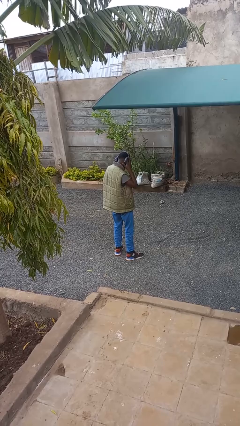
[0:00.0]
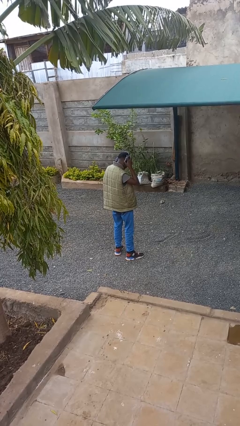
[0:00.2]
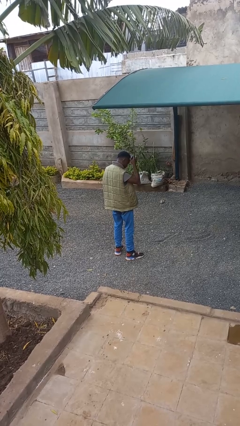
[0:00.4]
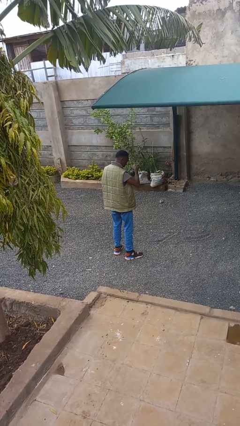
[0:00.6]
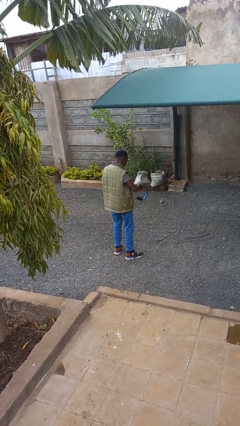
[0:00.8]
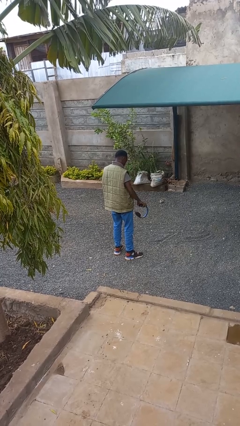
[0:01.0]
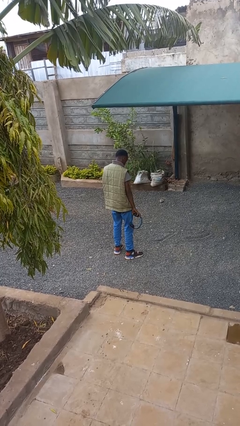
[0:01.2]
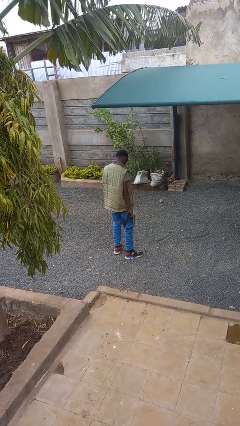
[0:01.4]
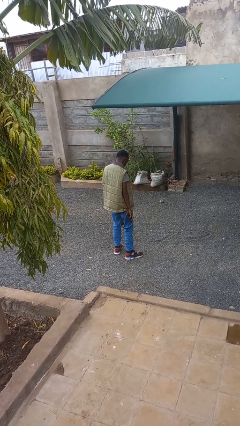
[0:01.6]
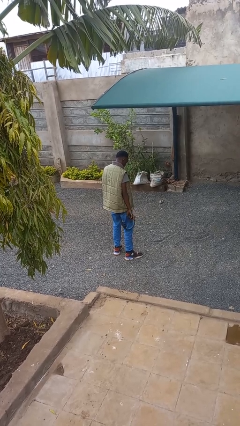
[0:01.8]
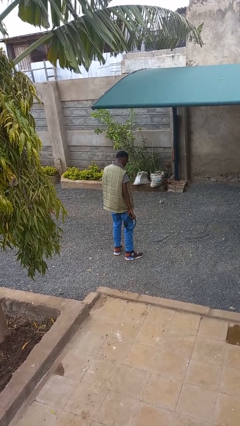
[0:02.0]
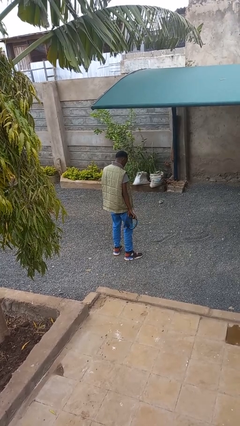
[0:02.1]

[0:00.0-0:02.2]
person takes off headphones

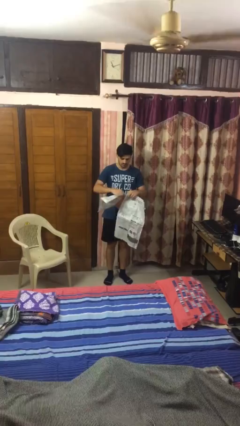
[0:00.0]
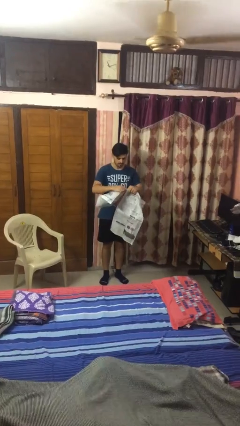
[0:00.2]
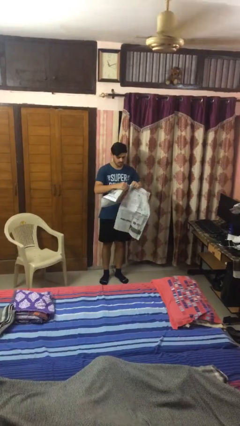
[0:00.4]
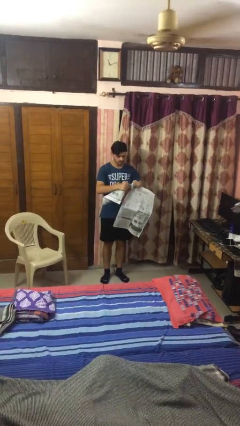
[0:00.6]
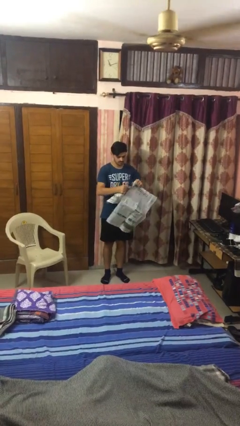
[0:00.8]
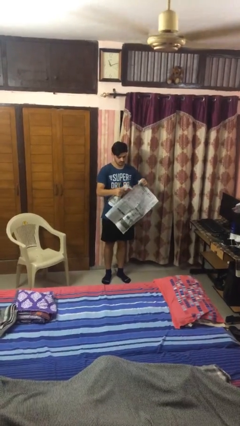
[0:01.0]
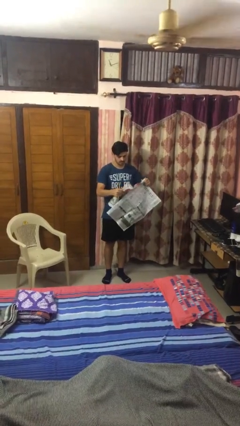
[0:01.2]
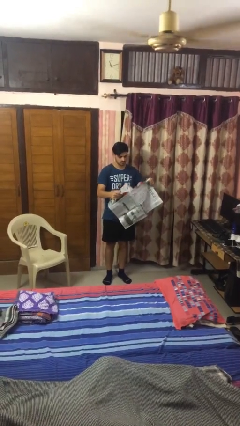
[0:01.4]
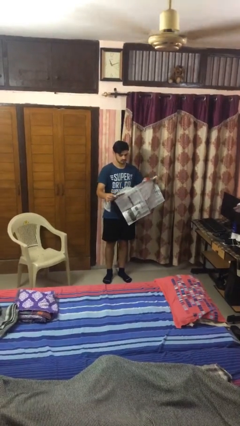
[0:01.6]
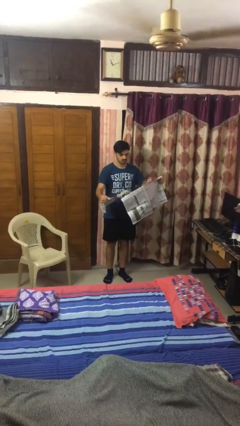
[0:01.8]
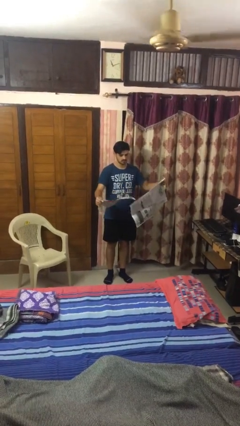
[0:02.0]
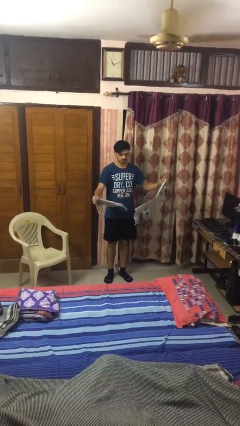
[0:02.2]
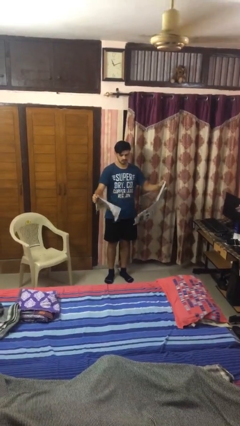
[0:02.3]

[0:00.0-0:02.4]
person tears paper

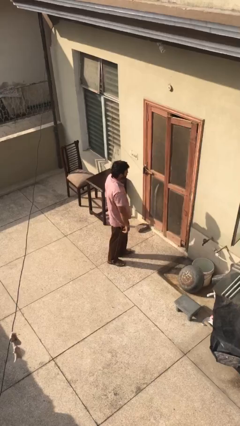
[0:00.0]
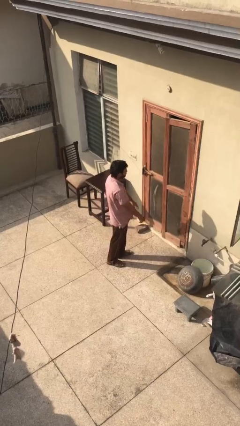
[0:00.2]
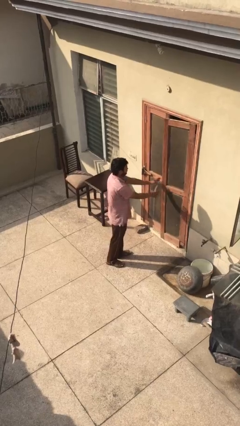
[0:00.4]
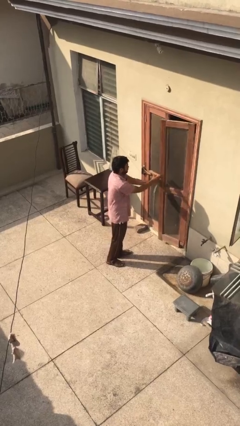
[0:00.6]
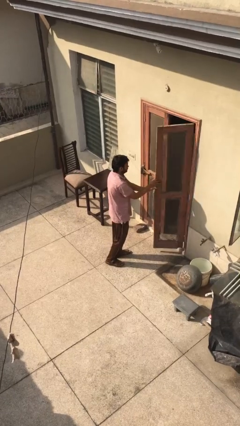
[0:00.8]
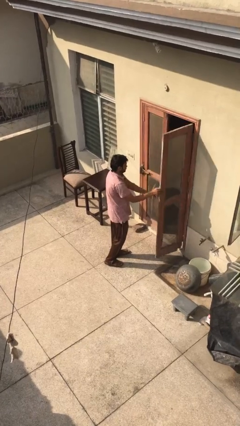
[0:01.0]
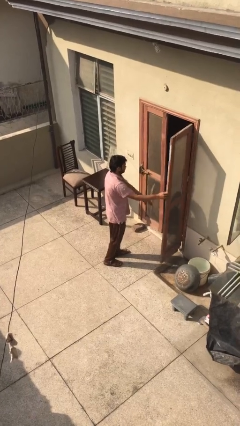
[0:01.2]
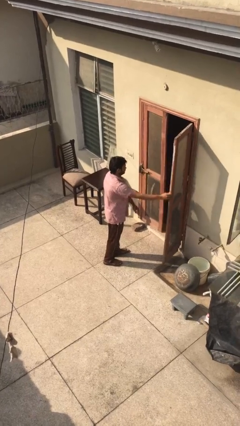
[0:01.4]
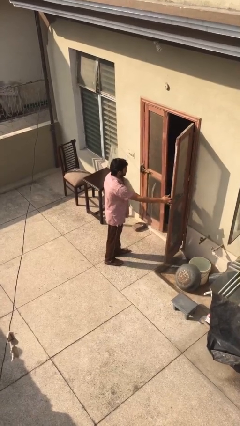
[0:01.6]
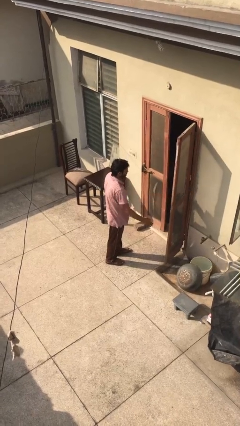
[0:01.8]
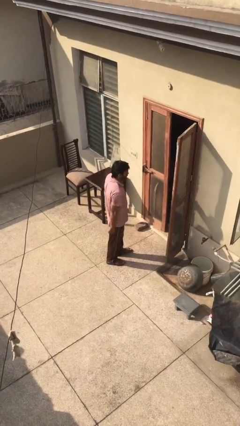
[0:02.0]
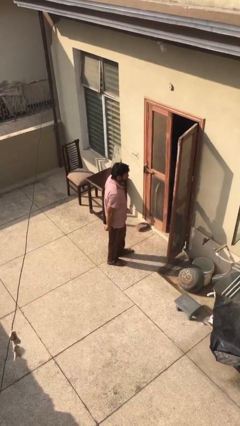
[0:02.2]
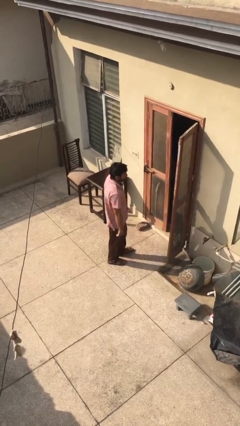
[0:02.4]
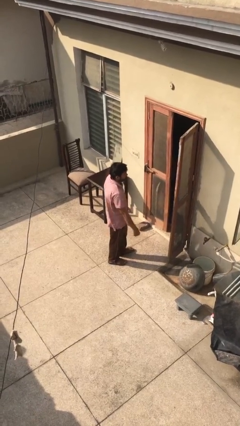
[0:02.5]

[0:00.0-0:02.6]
person opens facility door

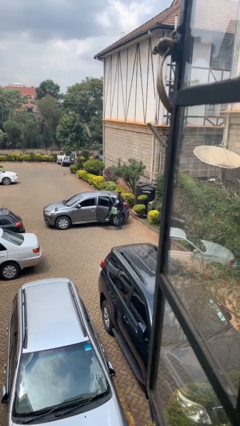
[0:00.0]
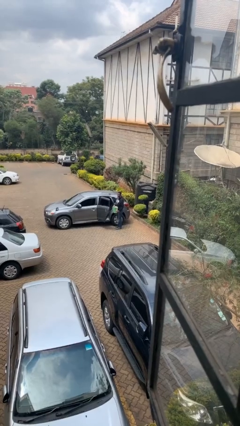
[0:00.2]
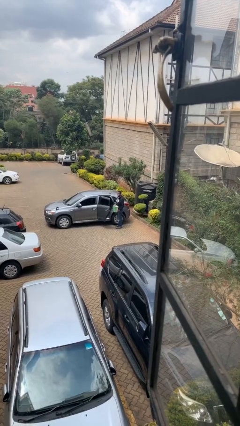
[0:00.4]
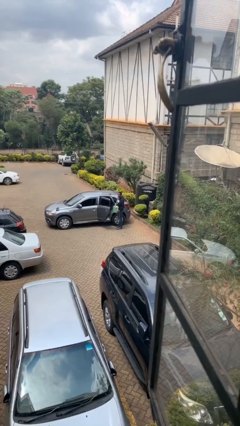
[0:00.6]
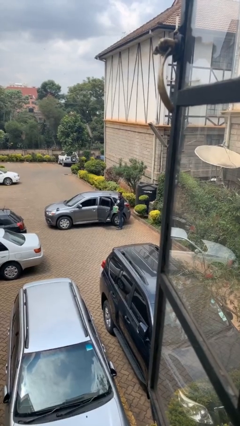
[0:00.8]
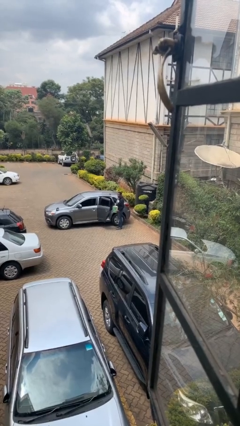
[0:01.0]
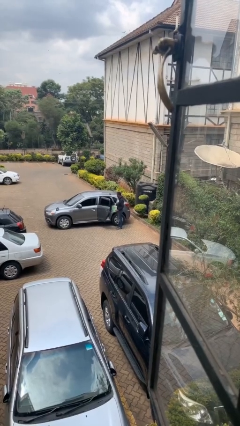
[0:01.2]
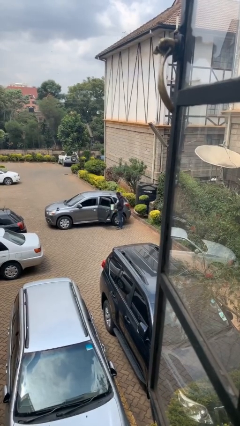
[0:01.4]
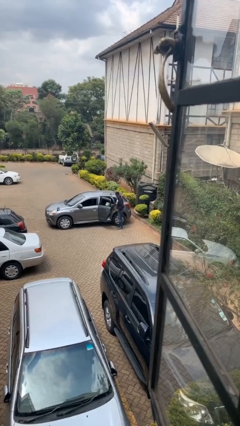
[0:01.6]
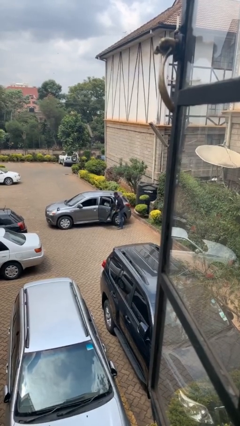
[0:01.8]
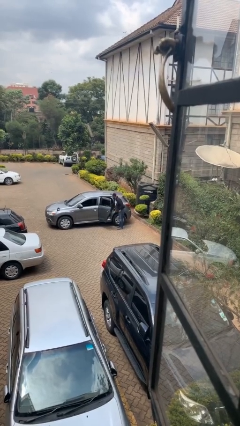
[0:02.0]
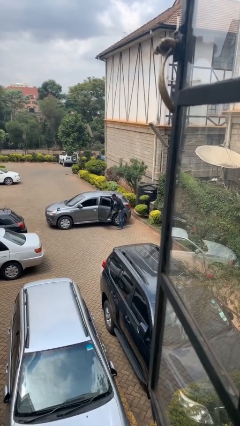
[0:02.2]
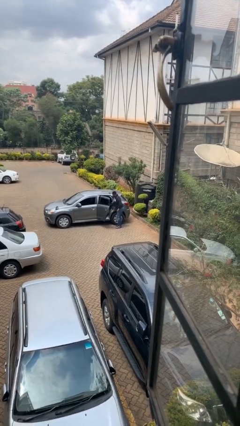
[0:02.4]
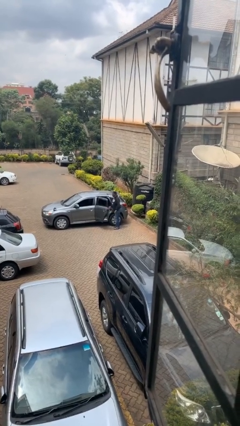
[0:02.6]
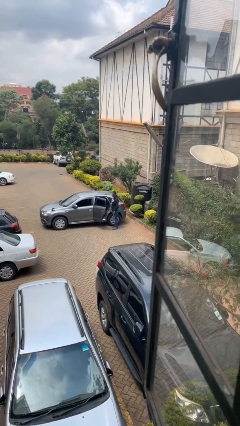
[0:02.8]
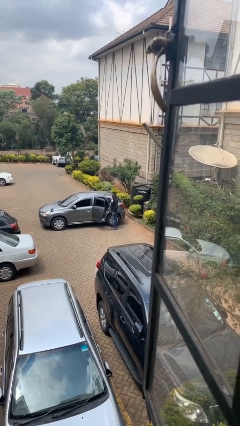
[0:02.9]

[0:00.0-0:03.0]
person loads car

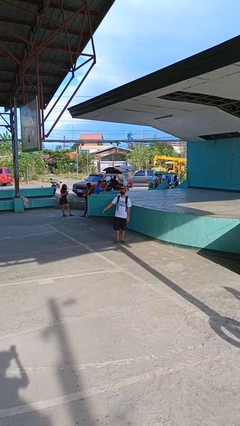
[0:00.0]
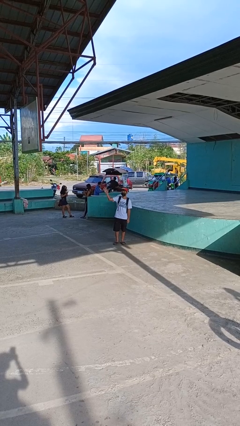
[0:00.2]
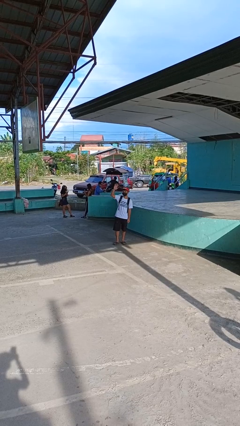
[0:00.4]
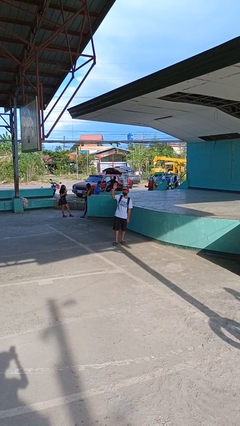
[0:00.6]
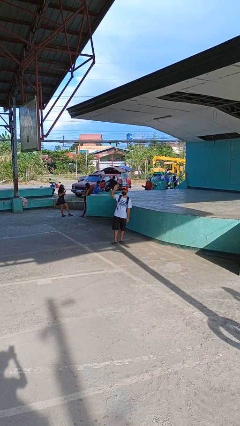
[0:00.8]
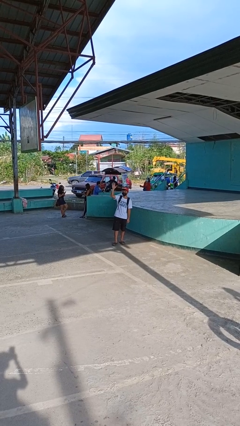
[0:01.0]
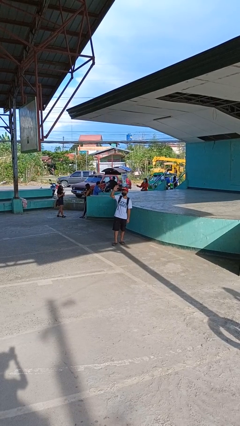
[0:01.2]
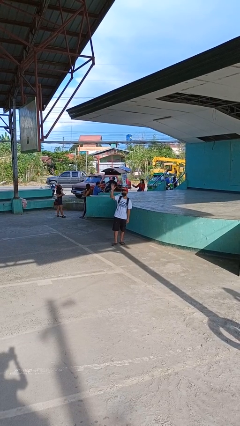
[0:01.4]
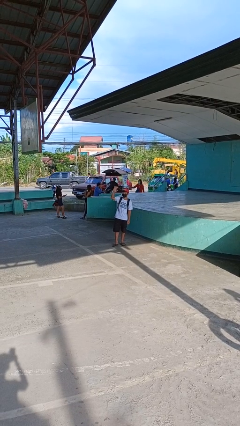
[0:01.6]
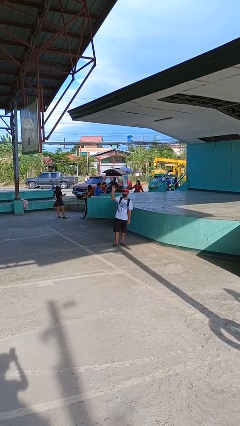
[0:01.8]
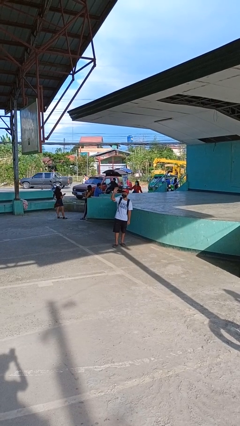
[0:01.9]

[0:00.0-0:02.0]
person waves at person

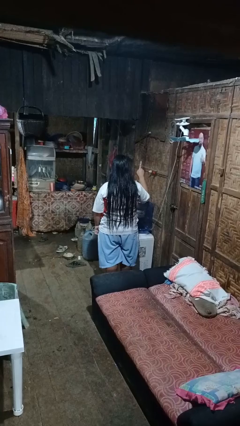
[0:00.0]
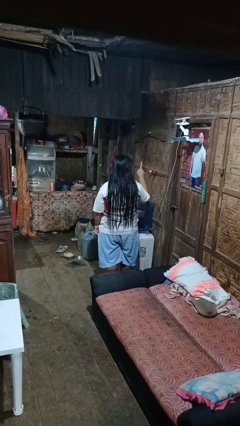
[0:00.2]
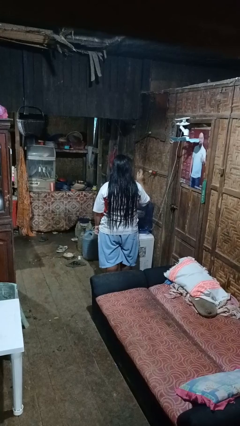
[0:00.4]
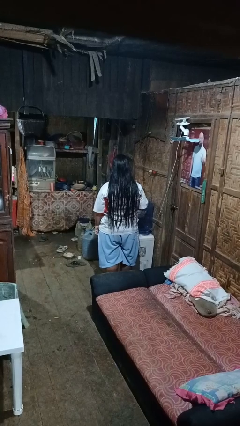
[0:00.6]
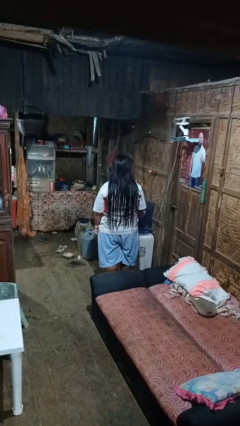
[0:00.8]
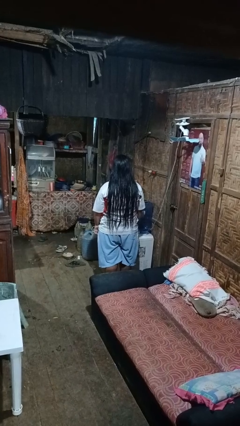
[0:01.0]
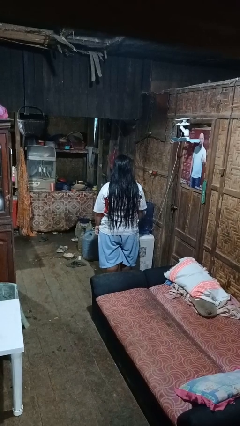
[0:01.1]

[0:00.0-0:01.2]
person gestures number one

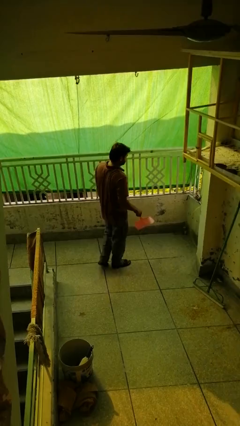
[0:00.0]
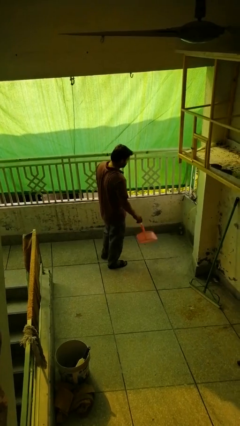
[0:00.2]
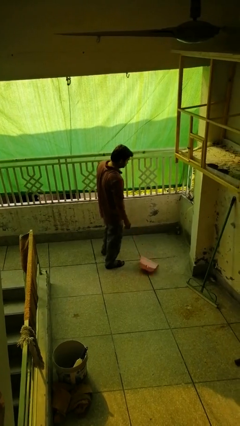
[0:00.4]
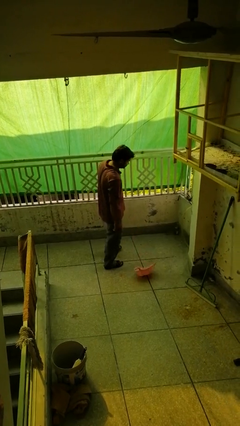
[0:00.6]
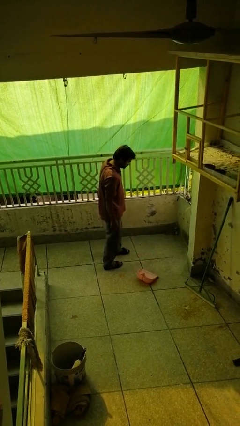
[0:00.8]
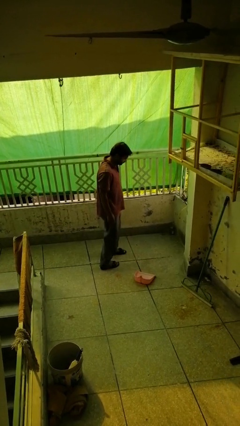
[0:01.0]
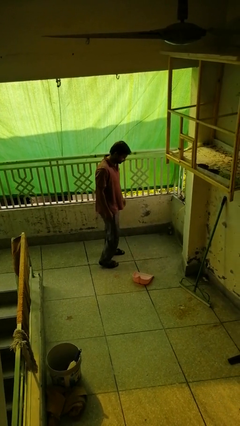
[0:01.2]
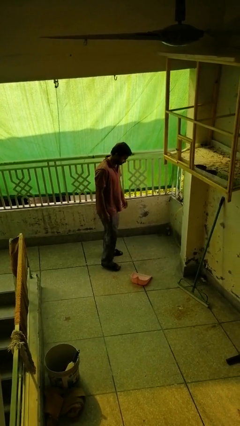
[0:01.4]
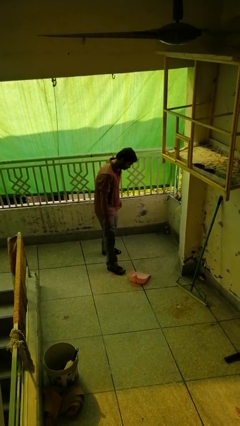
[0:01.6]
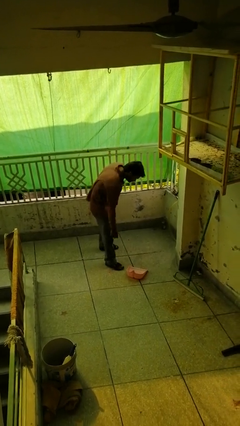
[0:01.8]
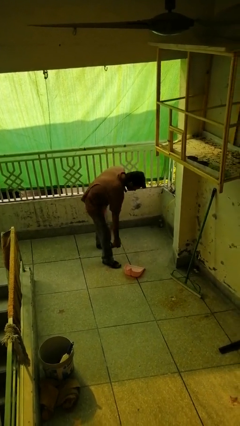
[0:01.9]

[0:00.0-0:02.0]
person drops object

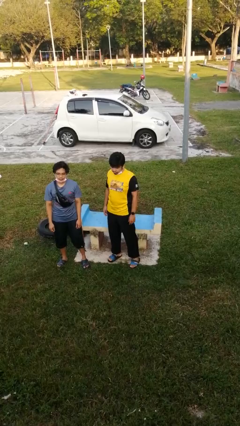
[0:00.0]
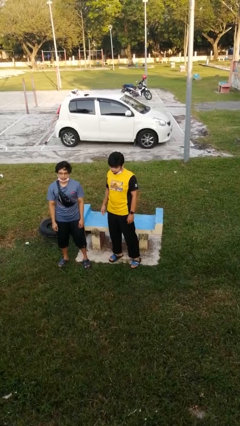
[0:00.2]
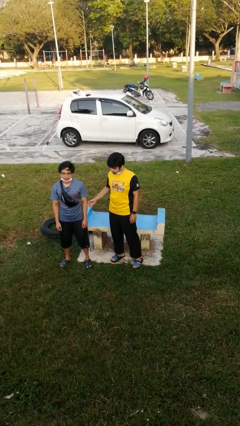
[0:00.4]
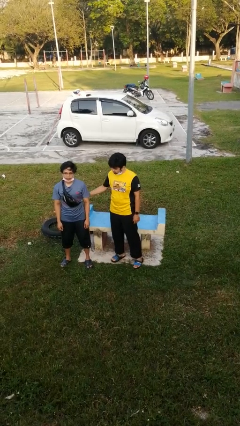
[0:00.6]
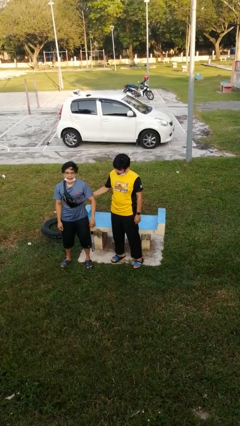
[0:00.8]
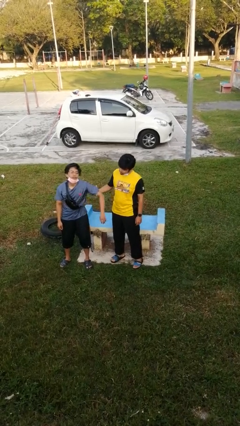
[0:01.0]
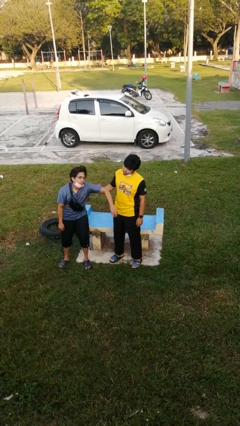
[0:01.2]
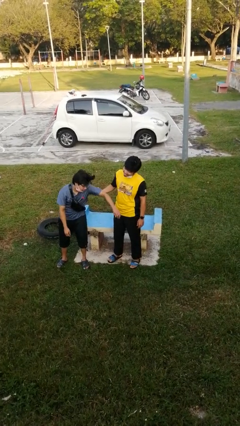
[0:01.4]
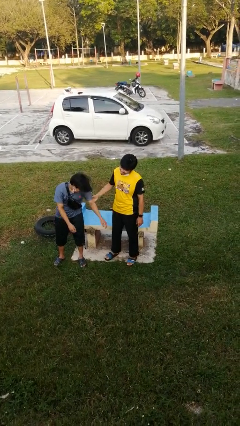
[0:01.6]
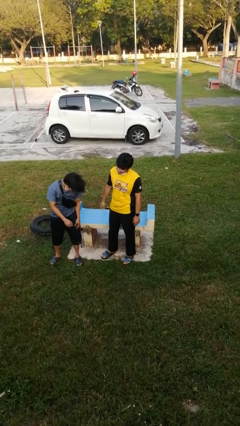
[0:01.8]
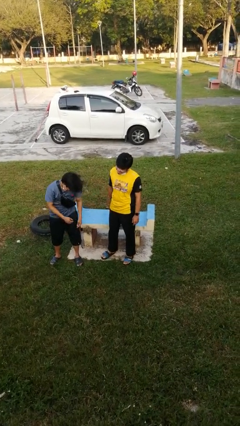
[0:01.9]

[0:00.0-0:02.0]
person grabs person by bicep
